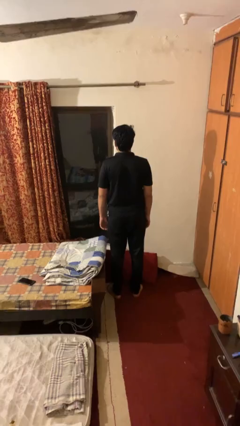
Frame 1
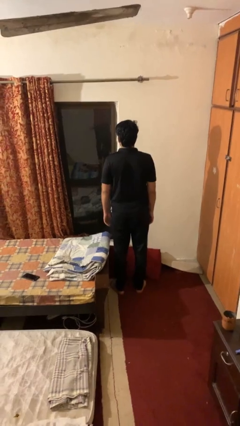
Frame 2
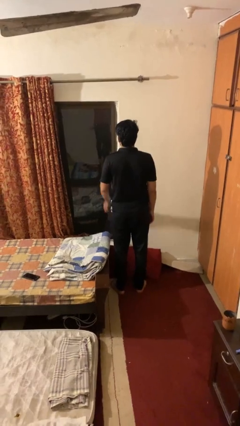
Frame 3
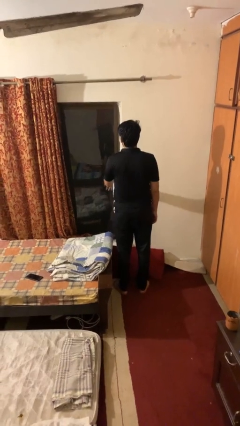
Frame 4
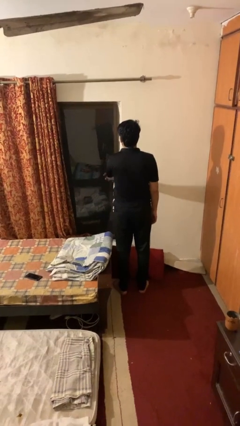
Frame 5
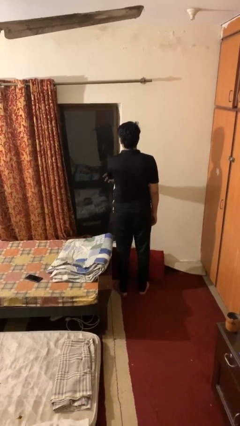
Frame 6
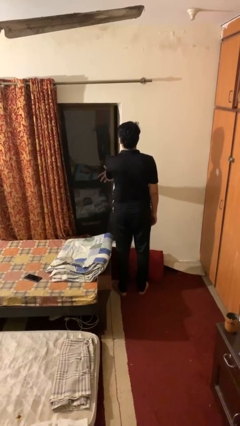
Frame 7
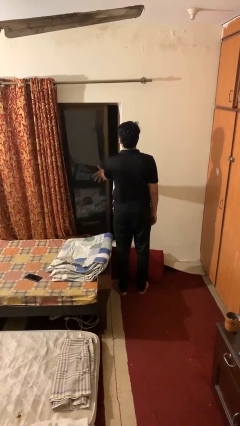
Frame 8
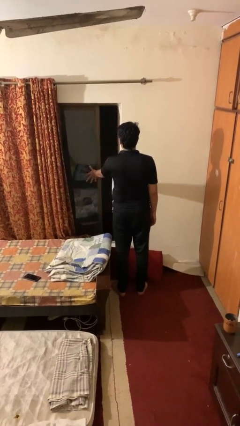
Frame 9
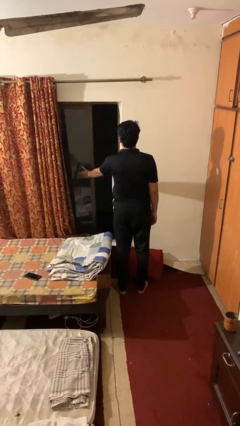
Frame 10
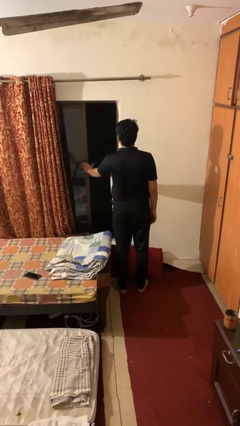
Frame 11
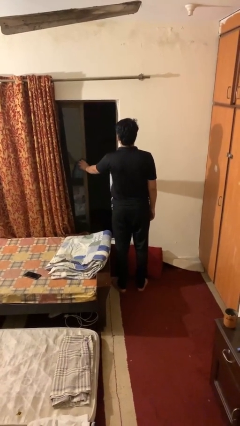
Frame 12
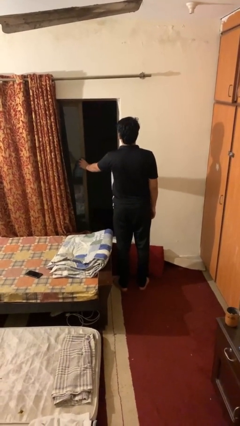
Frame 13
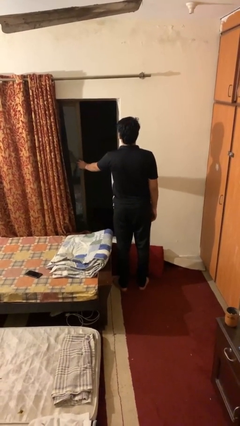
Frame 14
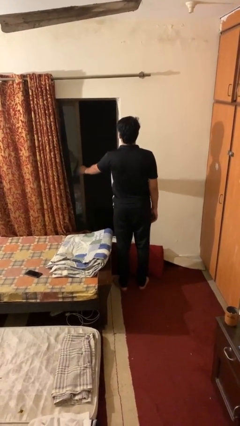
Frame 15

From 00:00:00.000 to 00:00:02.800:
person opens home window

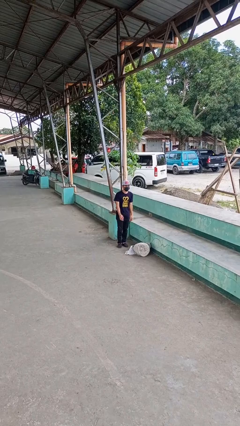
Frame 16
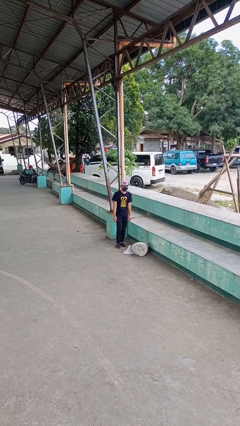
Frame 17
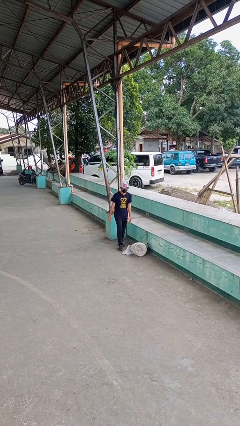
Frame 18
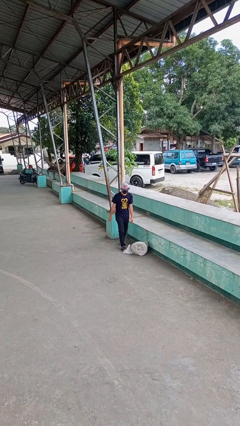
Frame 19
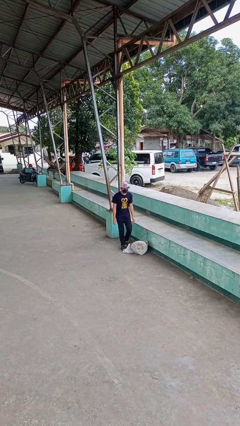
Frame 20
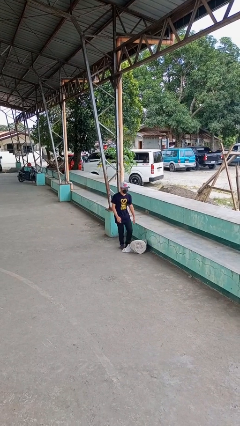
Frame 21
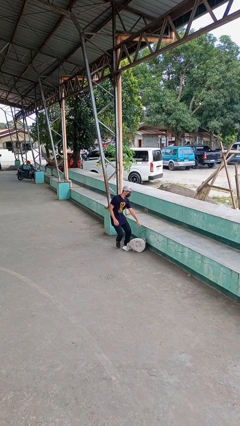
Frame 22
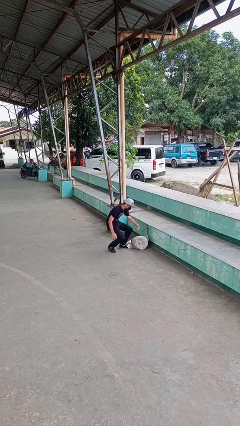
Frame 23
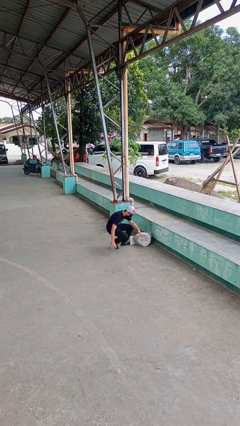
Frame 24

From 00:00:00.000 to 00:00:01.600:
person trips on object on floor

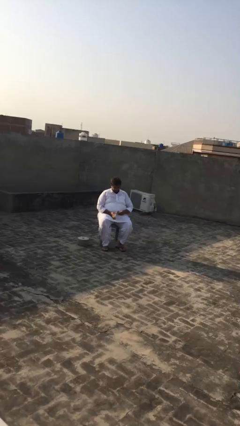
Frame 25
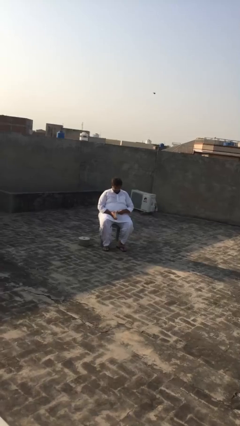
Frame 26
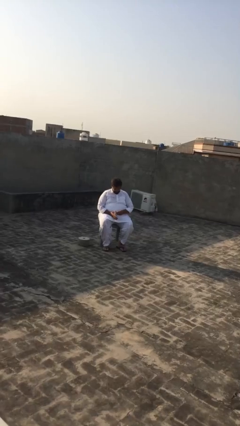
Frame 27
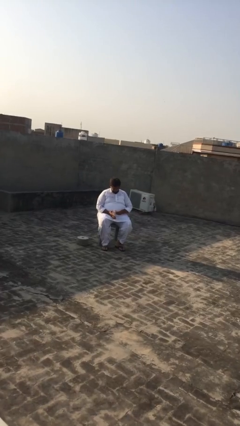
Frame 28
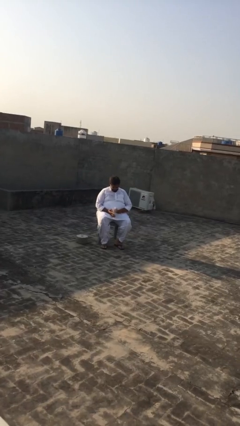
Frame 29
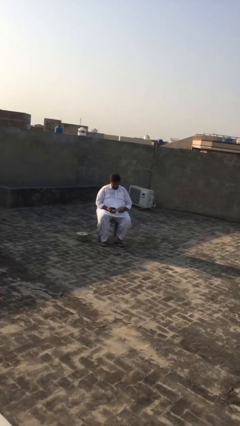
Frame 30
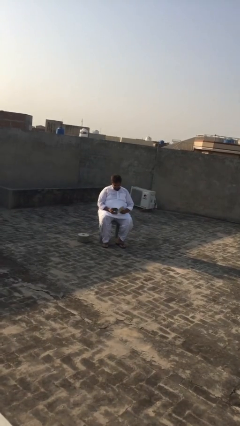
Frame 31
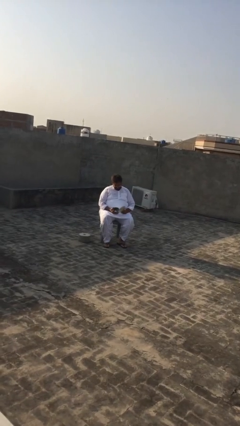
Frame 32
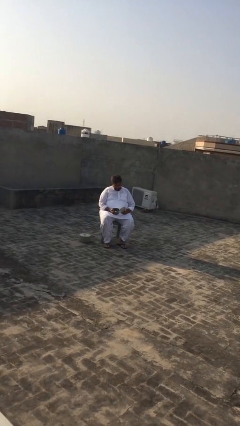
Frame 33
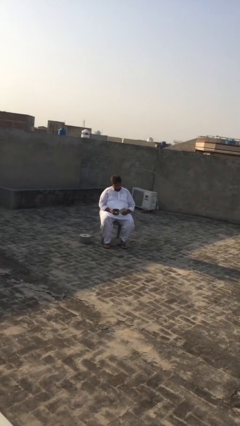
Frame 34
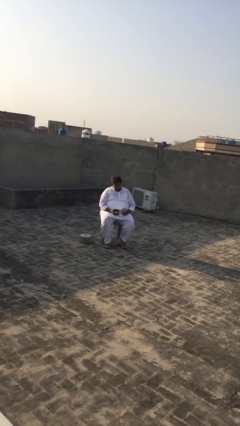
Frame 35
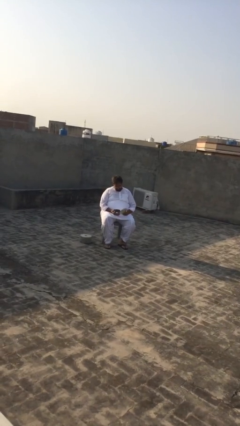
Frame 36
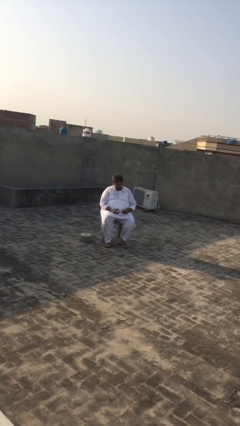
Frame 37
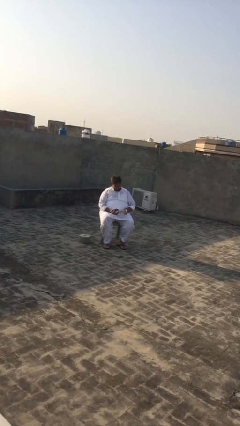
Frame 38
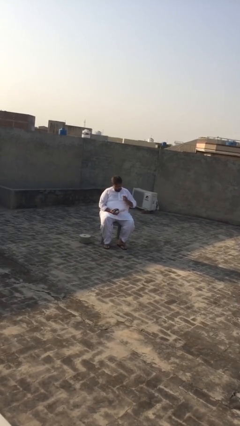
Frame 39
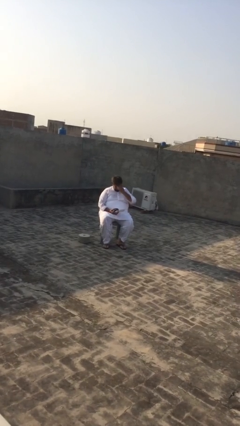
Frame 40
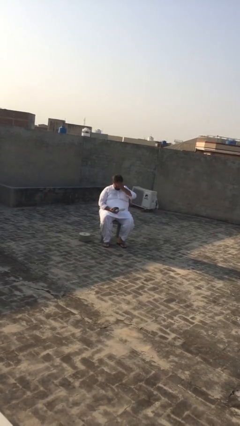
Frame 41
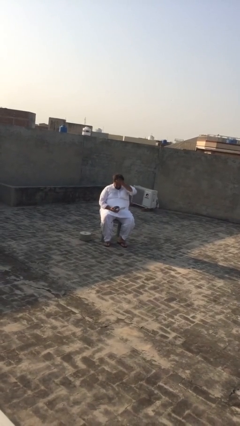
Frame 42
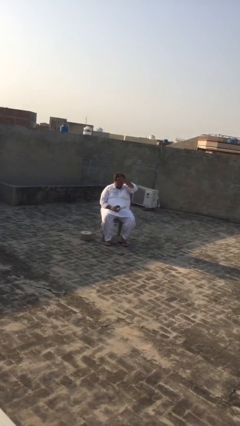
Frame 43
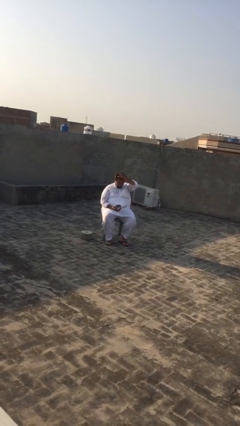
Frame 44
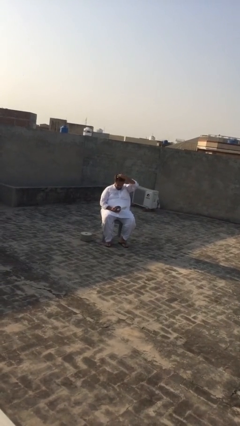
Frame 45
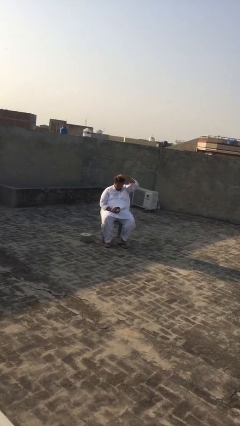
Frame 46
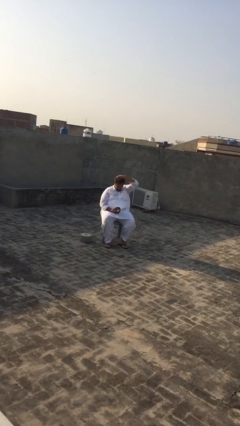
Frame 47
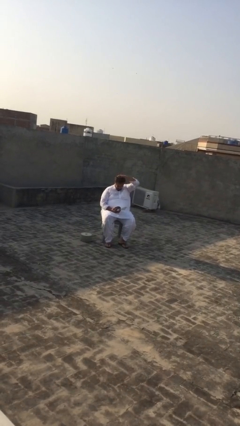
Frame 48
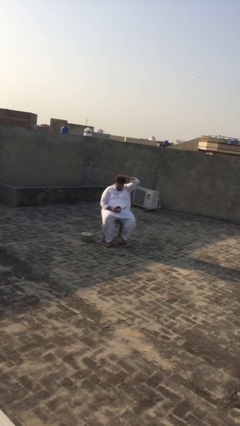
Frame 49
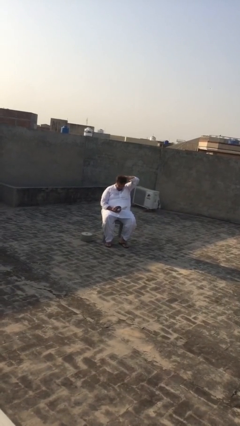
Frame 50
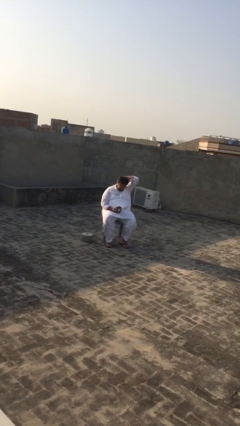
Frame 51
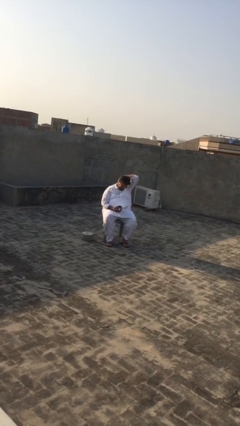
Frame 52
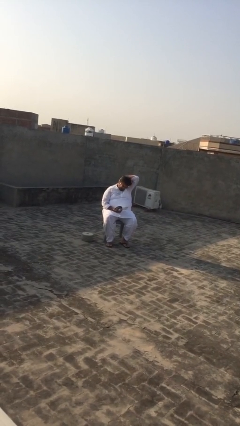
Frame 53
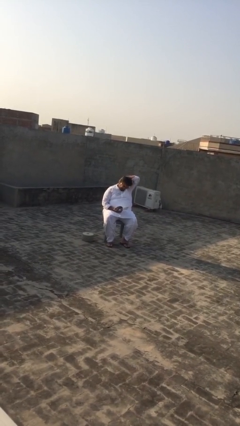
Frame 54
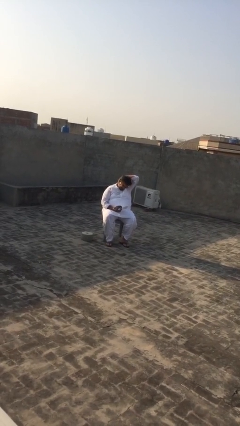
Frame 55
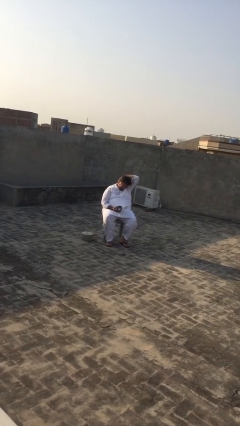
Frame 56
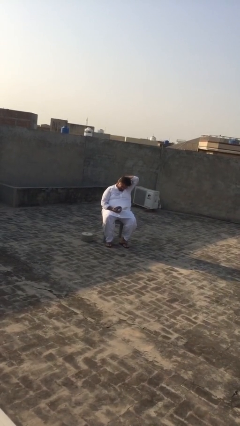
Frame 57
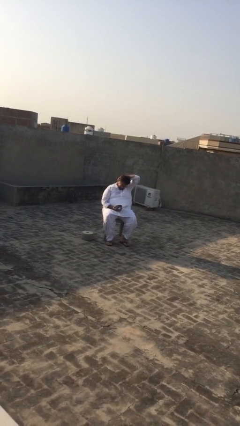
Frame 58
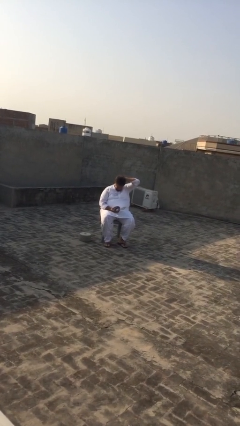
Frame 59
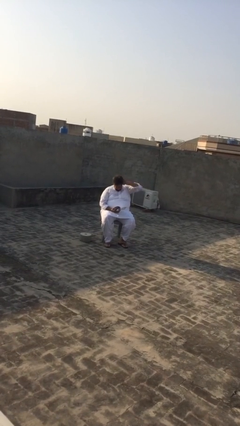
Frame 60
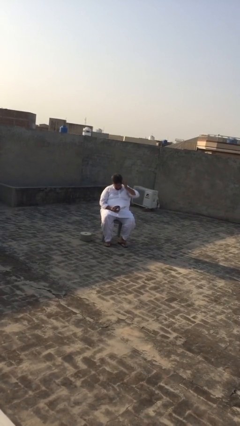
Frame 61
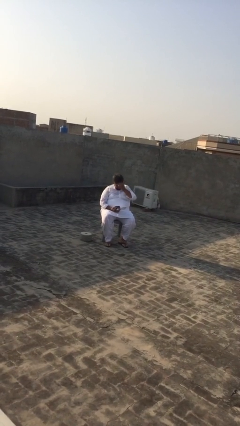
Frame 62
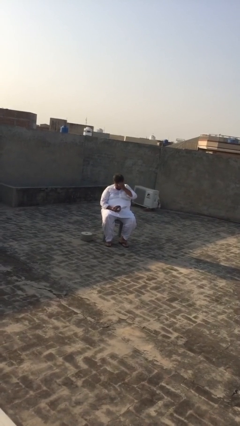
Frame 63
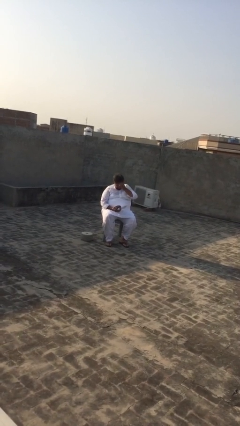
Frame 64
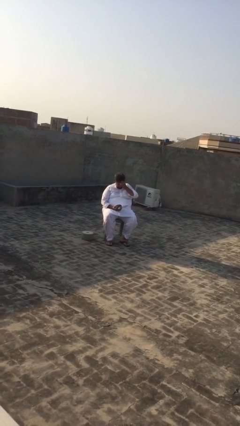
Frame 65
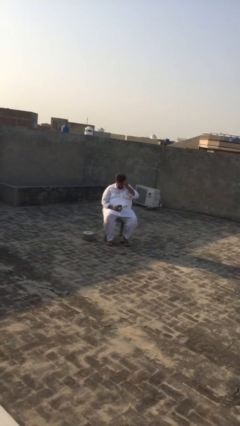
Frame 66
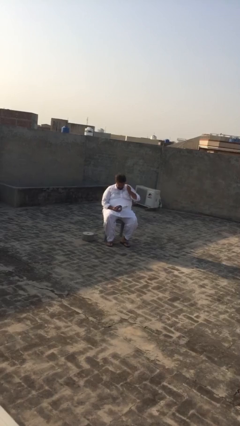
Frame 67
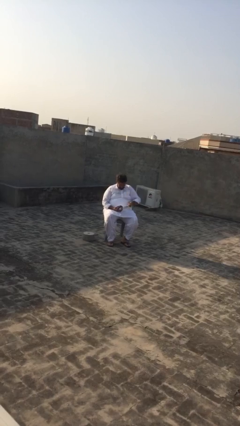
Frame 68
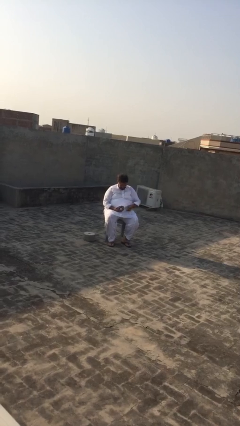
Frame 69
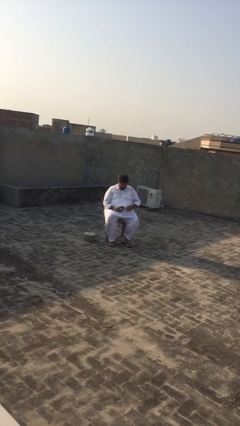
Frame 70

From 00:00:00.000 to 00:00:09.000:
person reads document

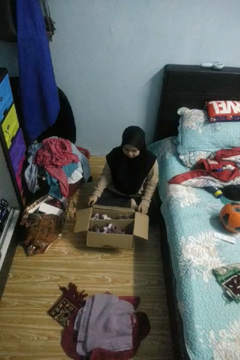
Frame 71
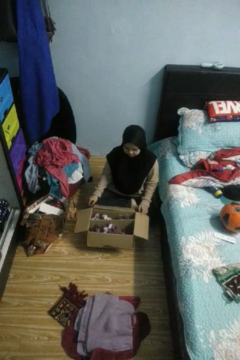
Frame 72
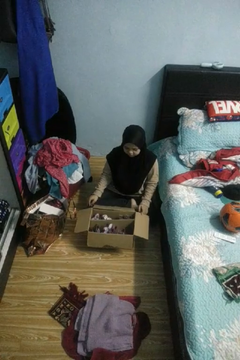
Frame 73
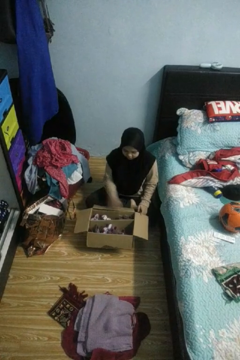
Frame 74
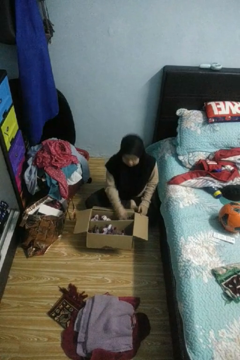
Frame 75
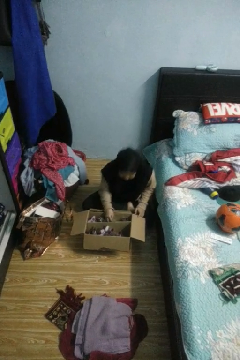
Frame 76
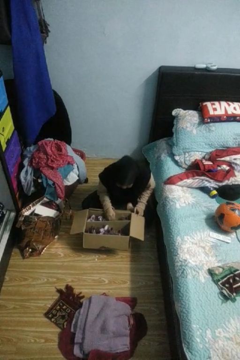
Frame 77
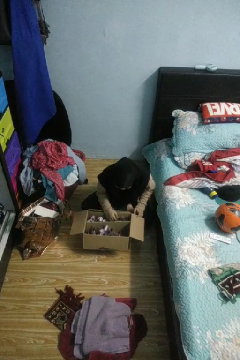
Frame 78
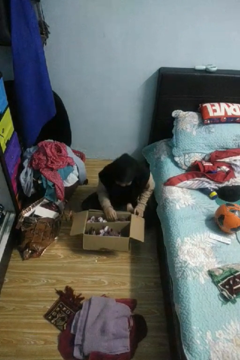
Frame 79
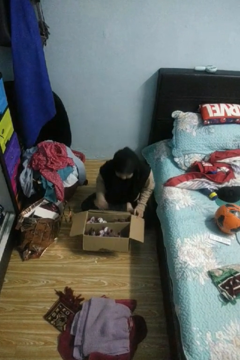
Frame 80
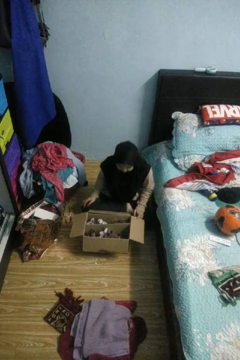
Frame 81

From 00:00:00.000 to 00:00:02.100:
person searches in box

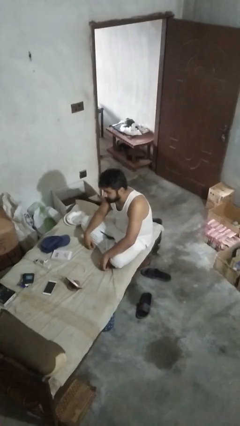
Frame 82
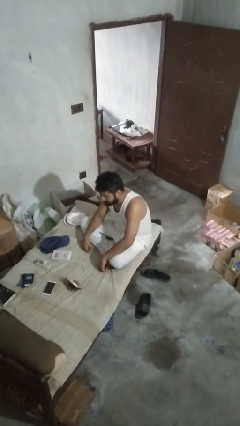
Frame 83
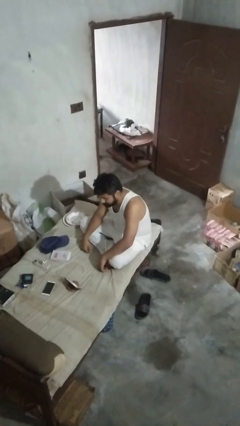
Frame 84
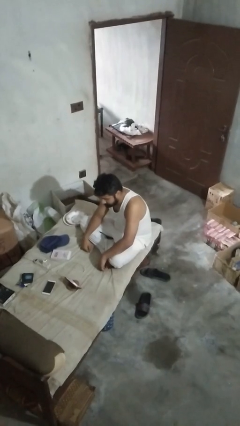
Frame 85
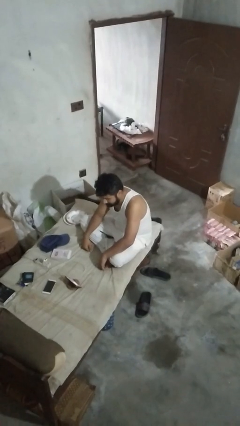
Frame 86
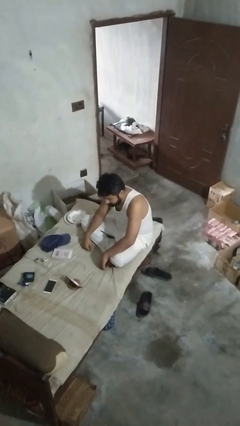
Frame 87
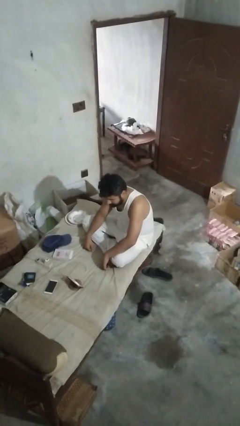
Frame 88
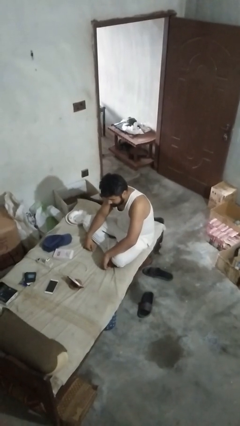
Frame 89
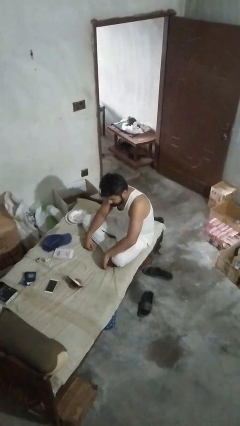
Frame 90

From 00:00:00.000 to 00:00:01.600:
person gestures lower hand

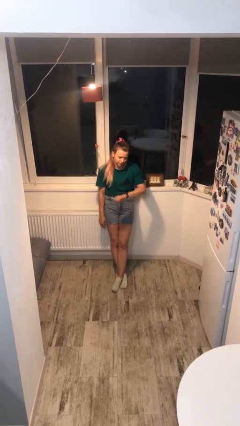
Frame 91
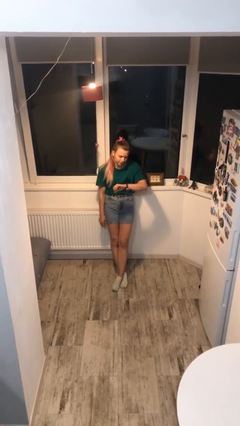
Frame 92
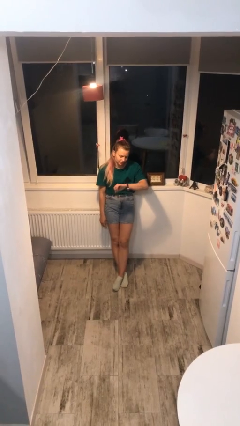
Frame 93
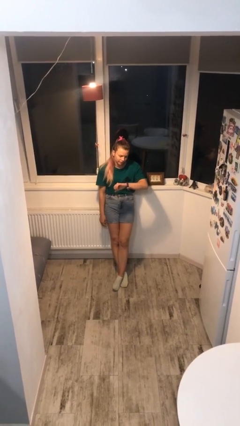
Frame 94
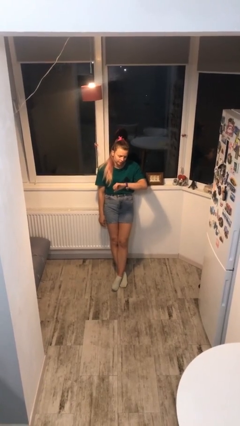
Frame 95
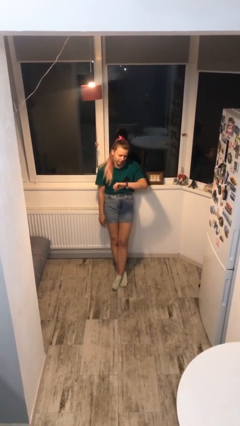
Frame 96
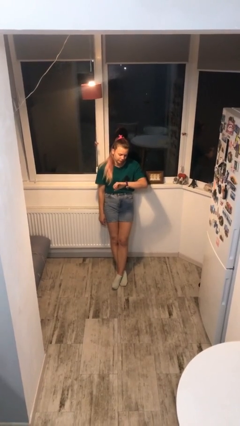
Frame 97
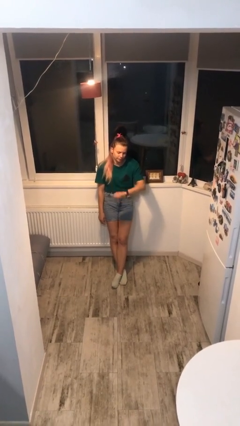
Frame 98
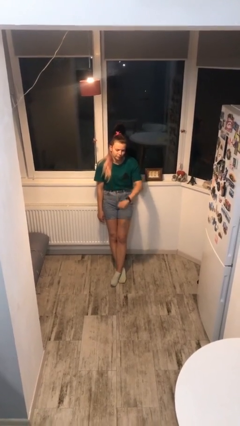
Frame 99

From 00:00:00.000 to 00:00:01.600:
person looks at wristwatch
